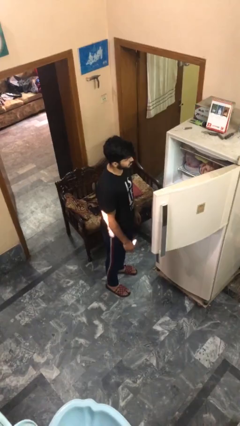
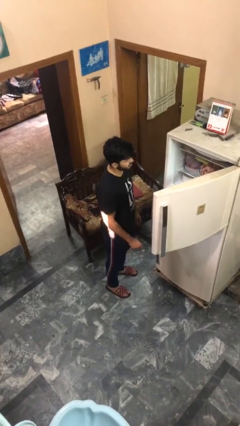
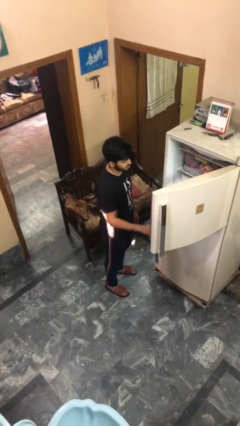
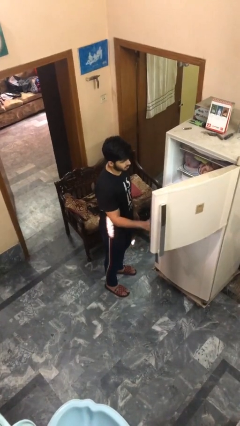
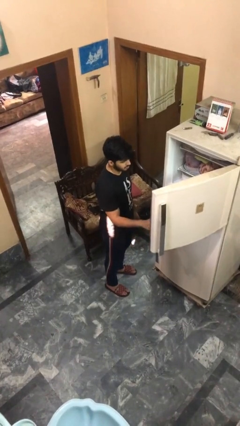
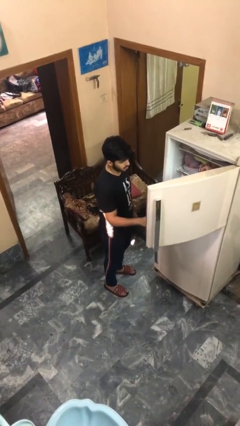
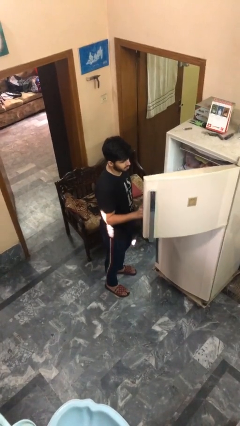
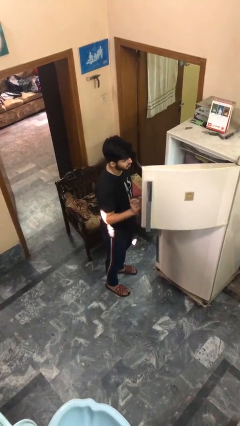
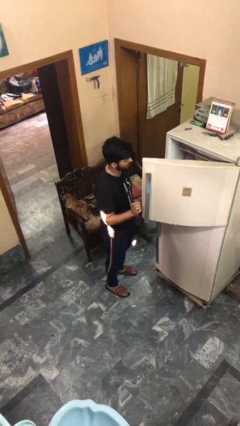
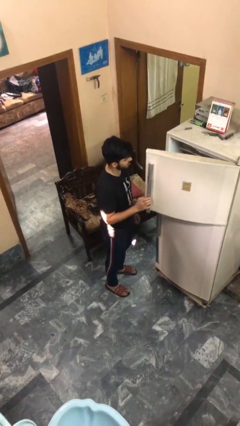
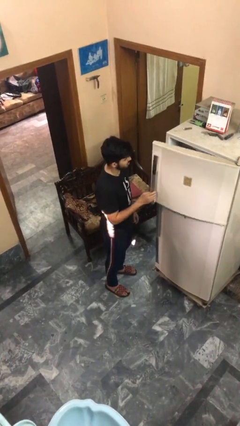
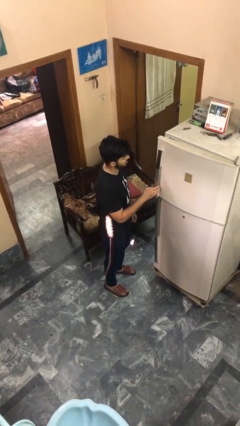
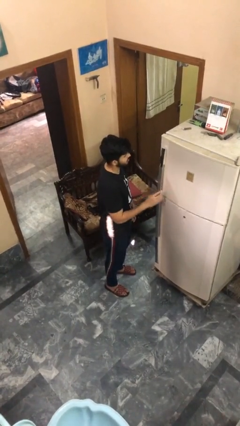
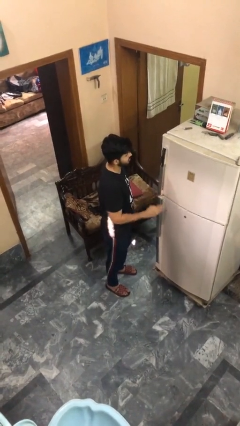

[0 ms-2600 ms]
person closes refrigerator

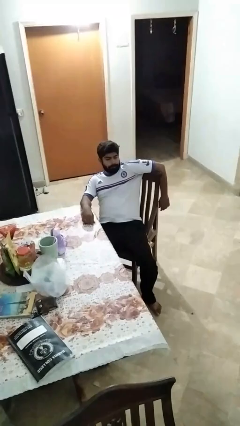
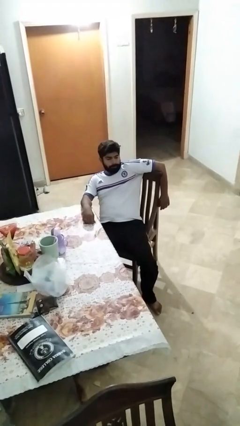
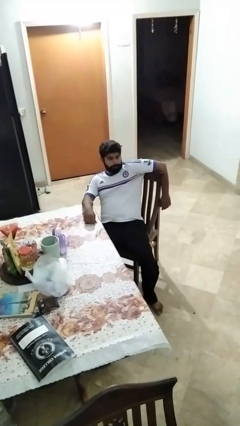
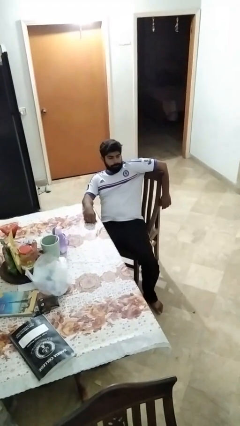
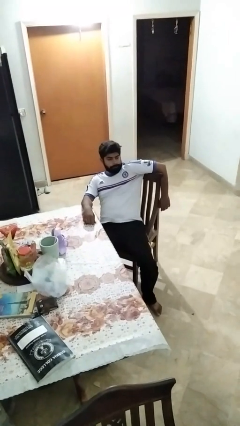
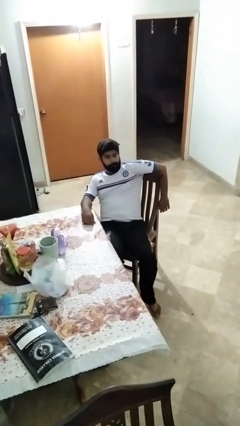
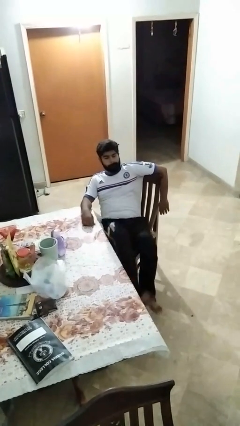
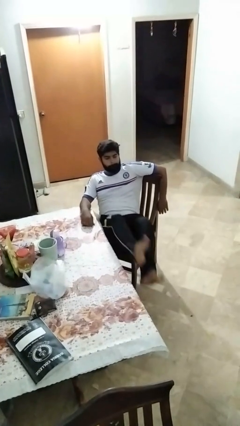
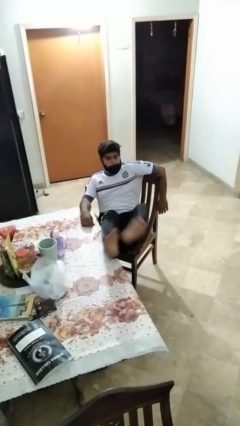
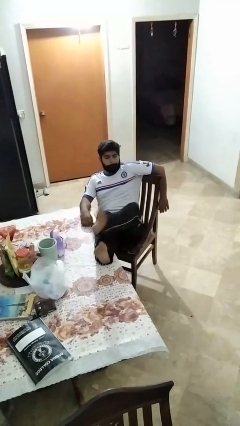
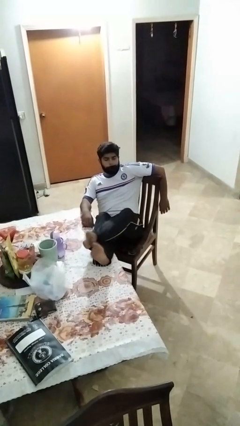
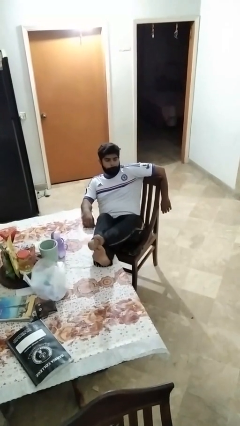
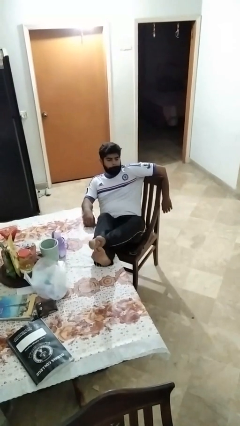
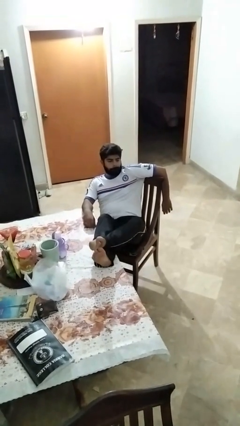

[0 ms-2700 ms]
person puts feet up

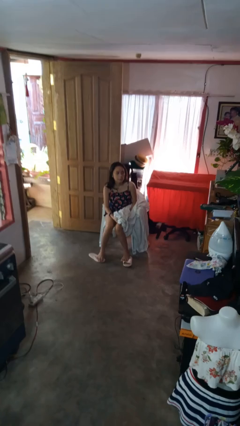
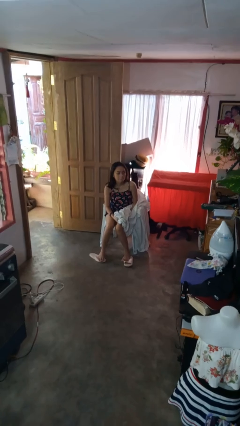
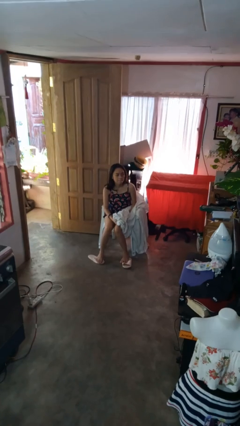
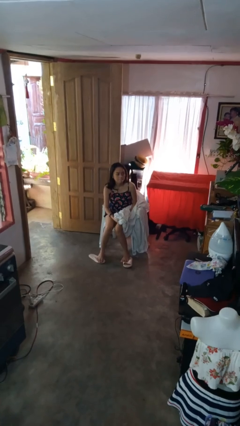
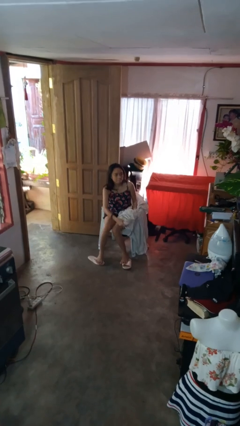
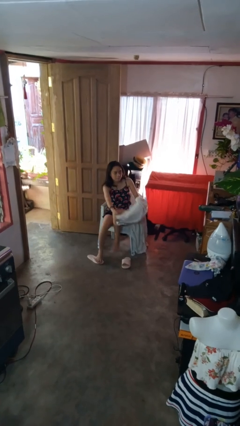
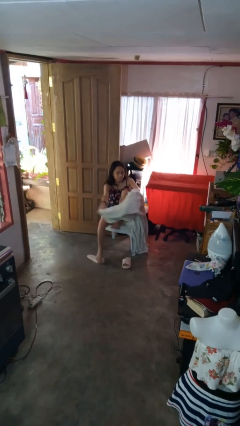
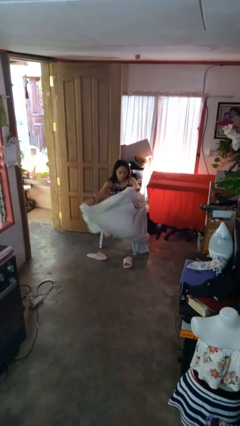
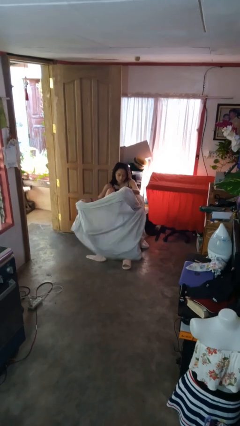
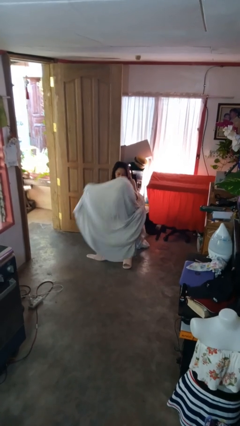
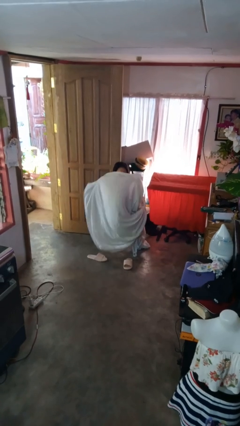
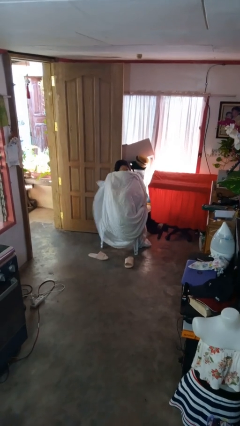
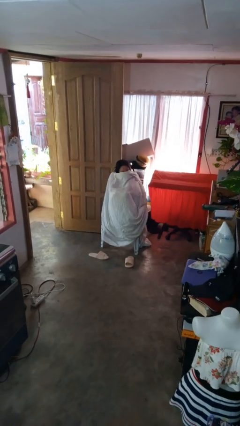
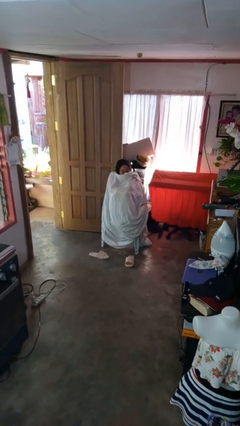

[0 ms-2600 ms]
person covers with blanket

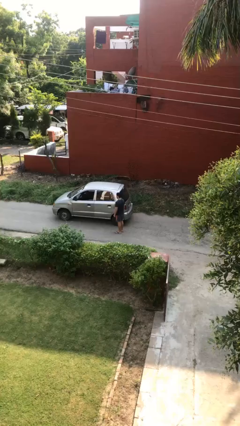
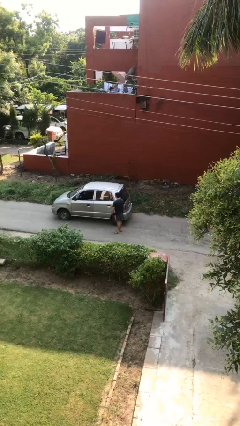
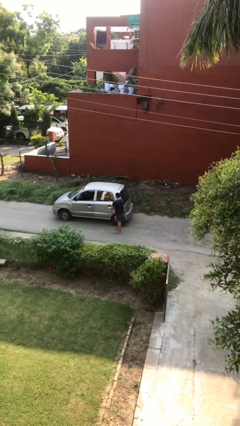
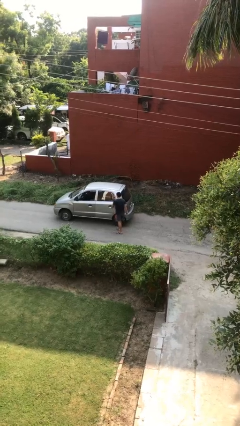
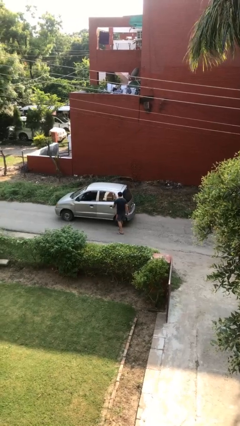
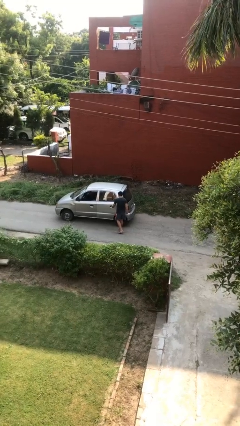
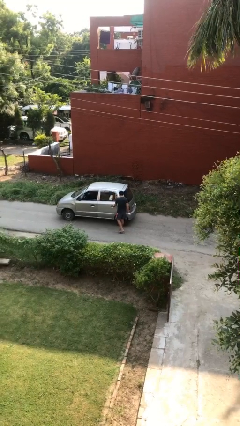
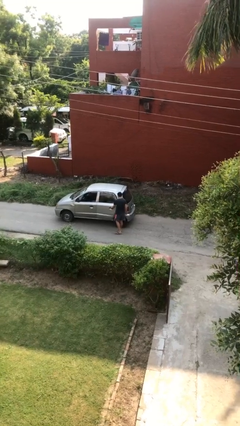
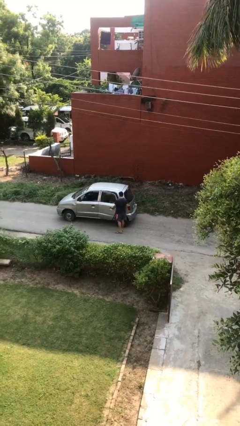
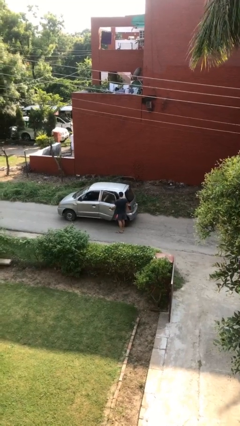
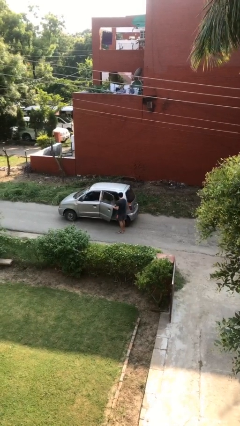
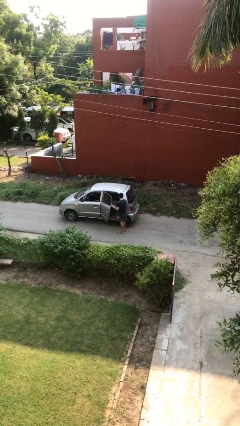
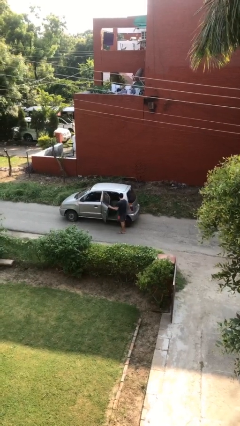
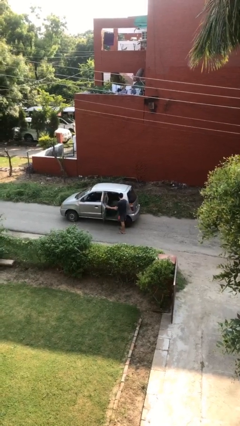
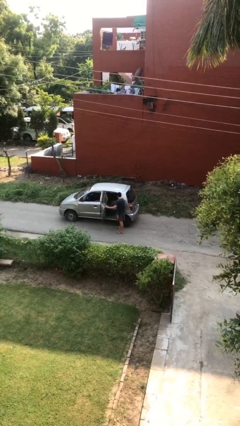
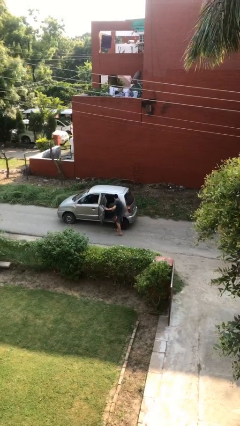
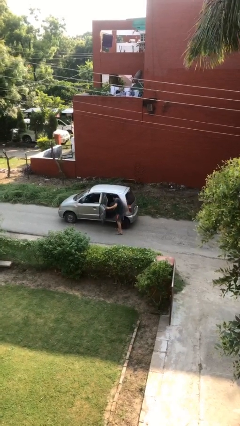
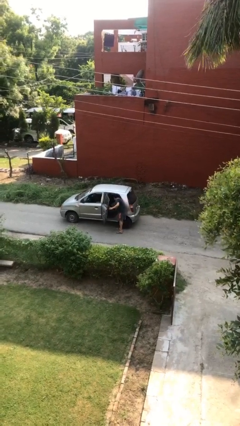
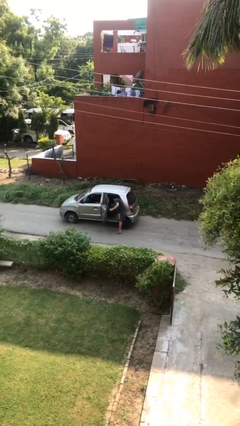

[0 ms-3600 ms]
person opens car door

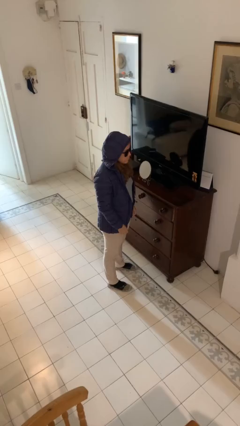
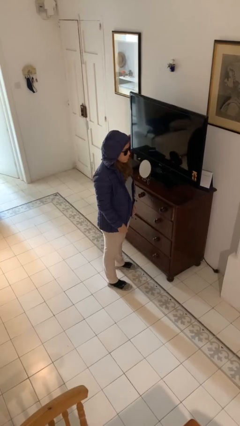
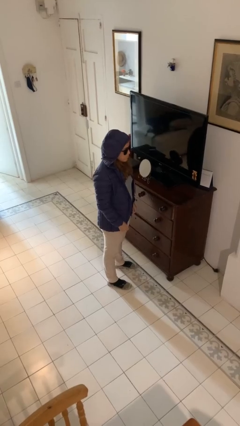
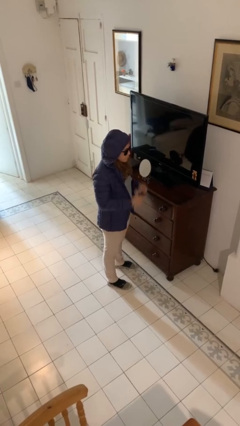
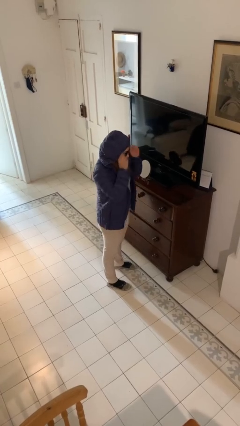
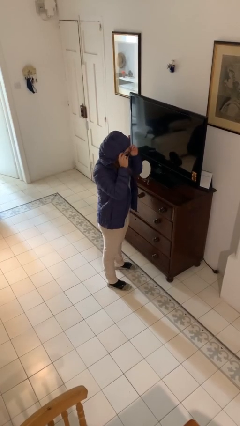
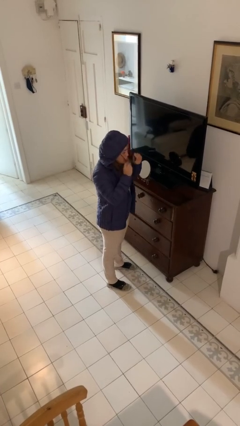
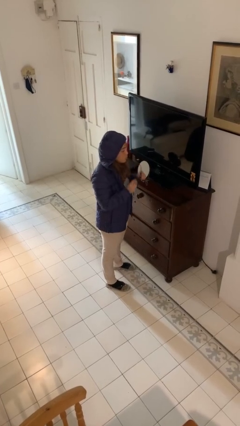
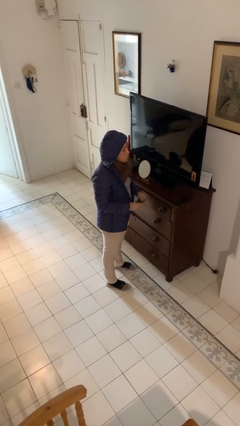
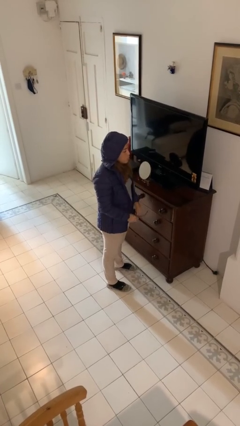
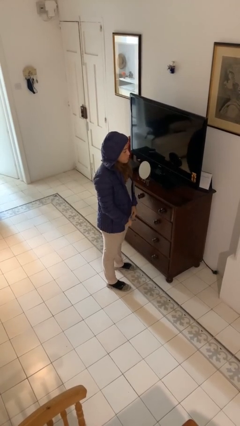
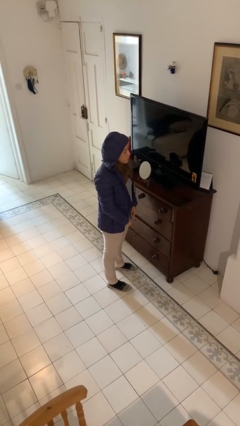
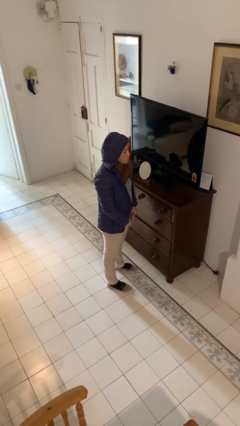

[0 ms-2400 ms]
person takes off sunglasses

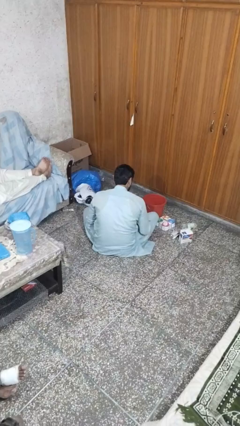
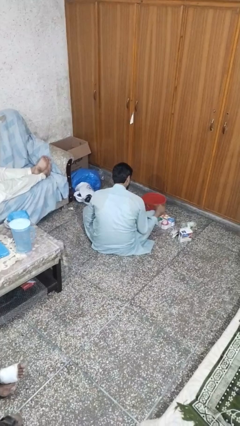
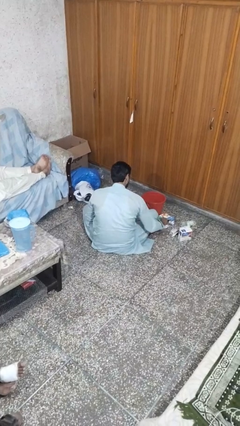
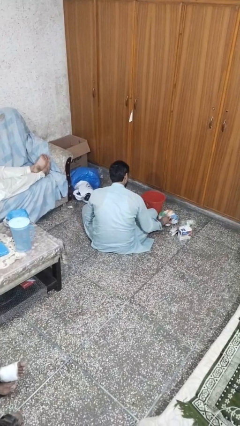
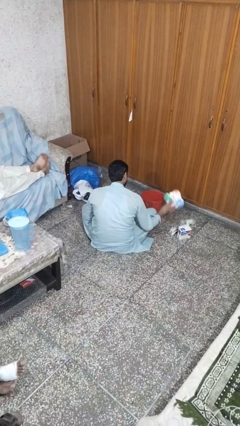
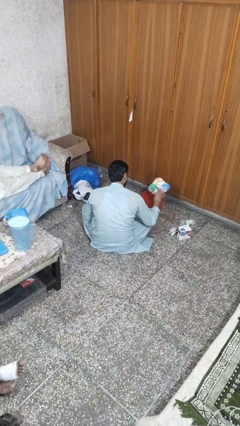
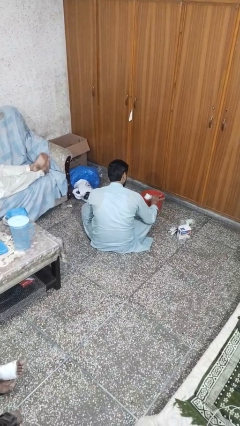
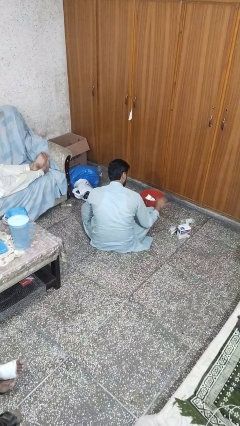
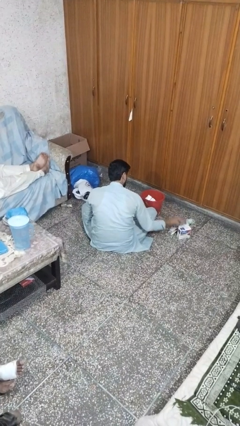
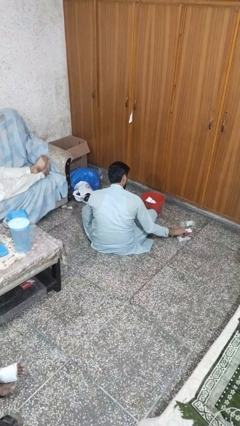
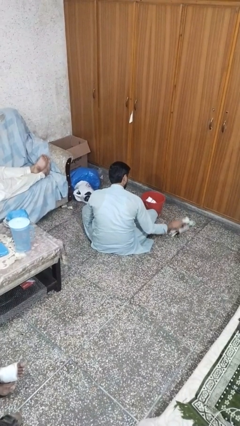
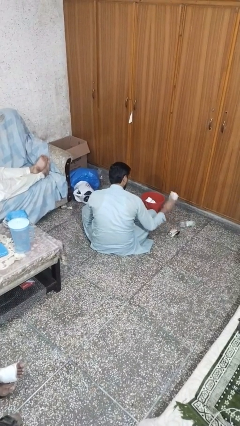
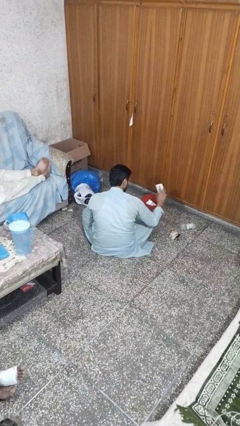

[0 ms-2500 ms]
person puts object into basket

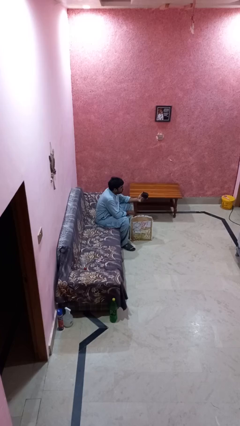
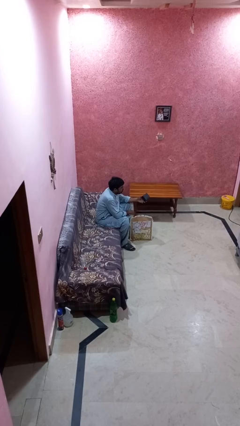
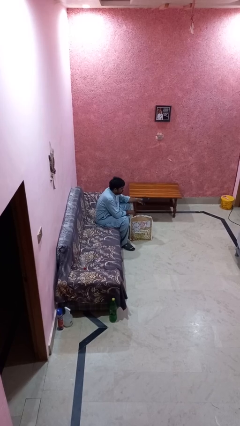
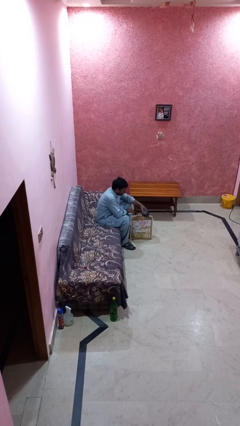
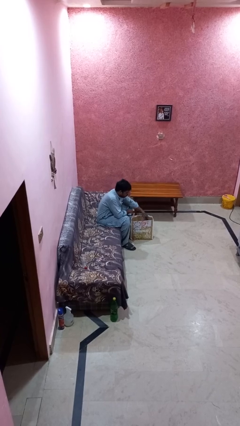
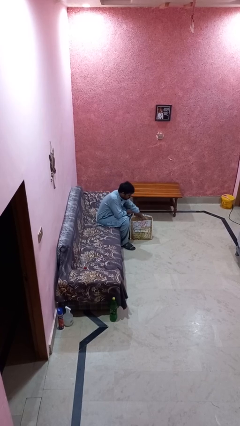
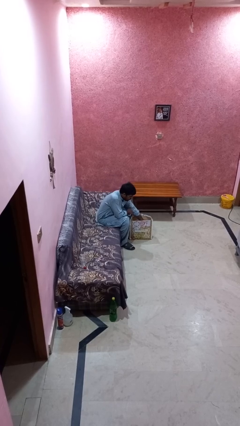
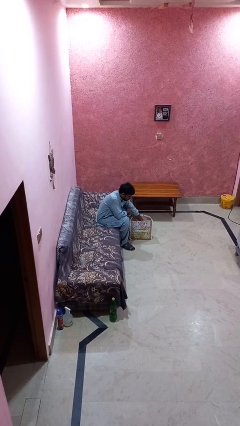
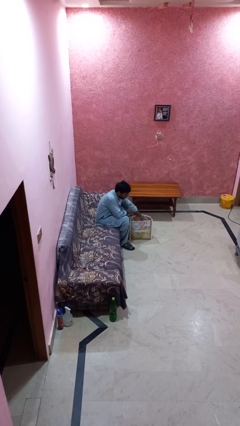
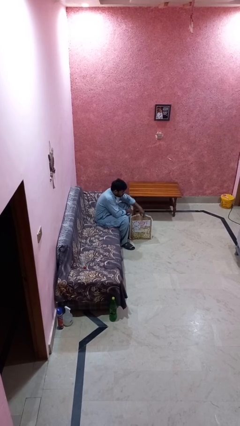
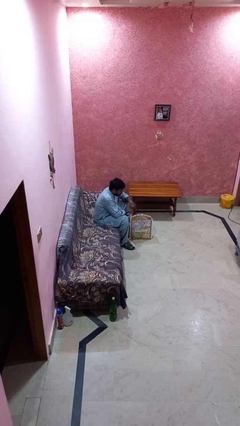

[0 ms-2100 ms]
person puts object into bag
